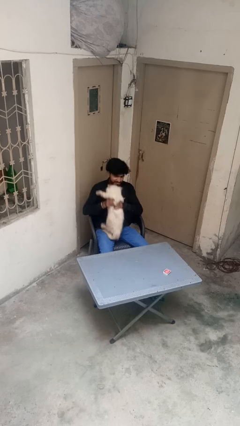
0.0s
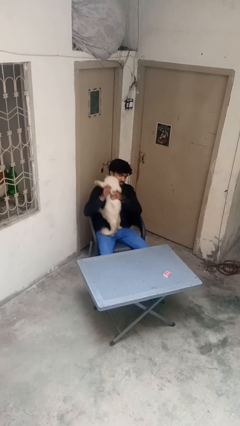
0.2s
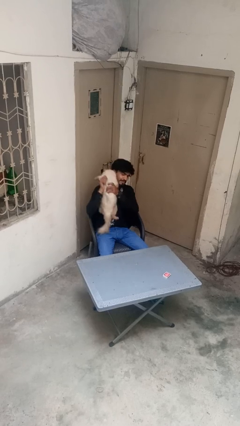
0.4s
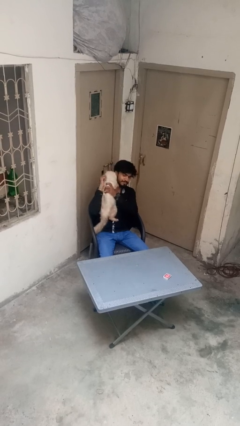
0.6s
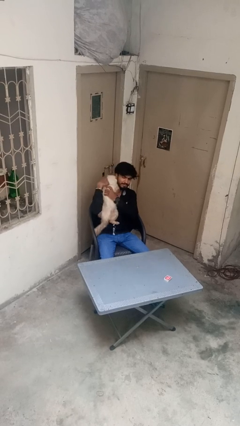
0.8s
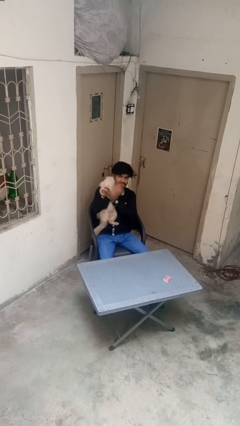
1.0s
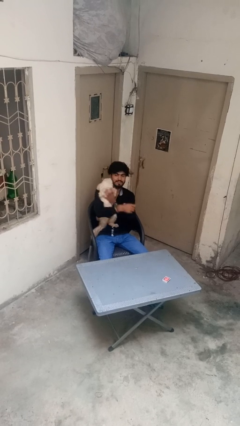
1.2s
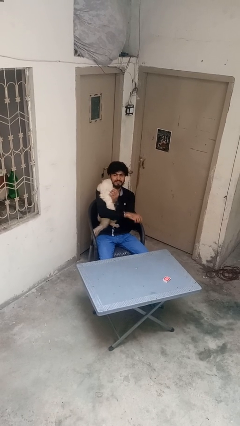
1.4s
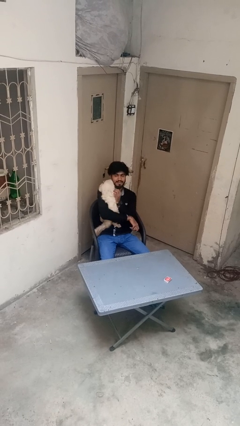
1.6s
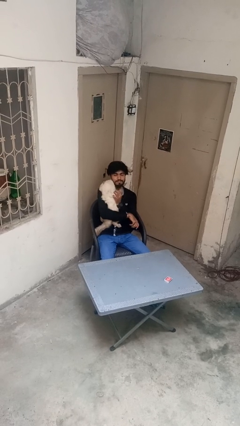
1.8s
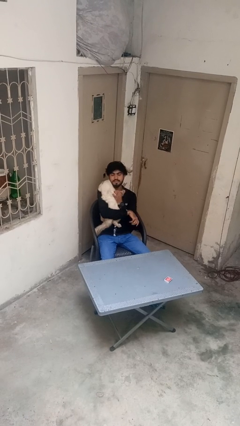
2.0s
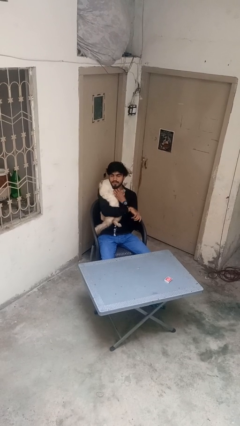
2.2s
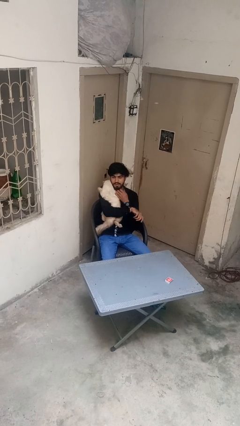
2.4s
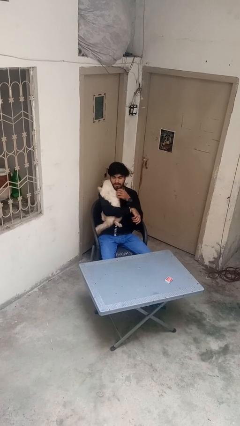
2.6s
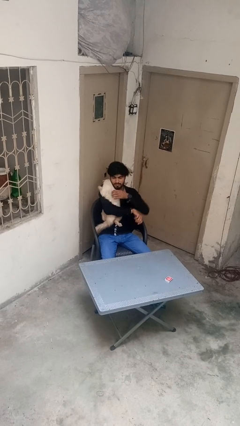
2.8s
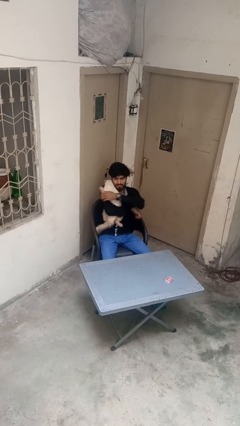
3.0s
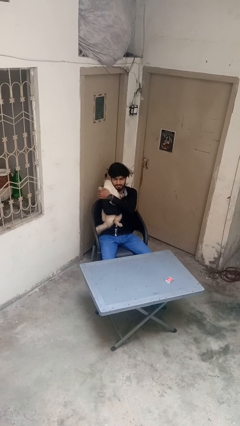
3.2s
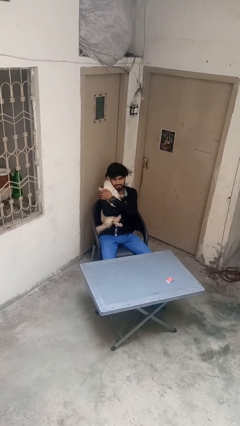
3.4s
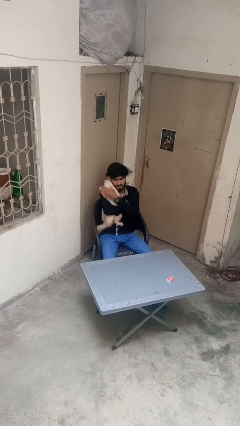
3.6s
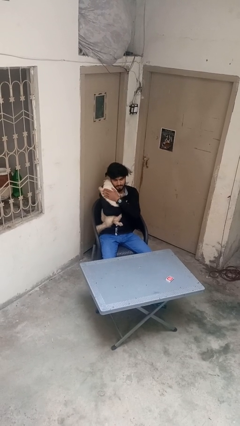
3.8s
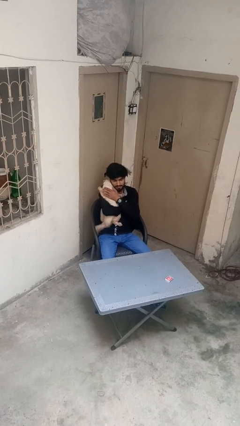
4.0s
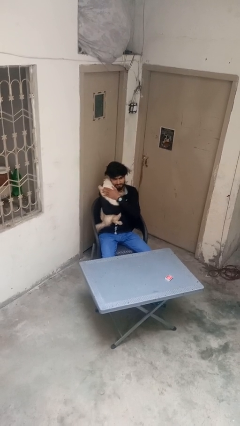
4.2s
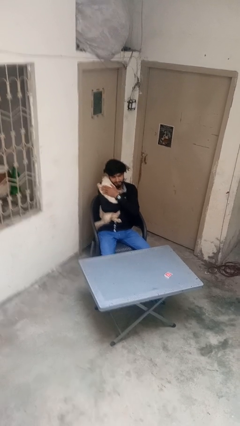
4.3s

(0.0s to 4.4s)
person hugs cat

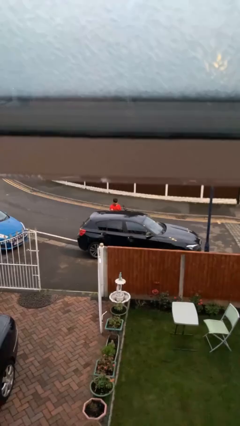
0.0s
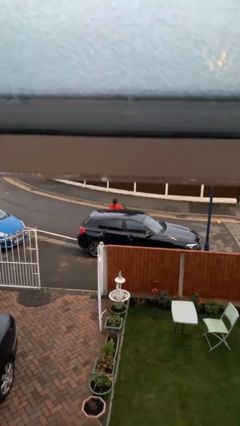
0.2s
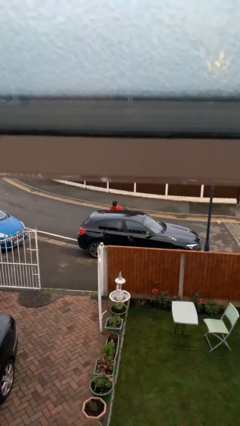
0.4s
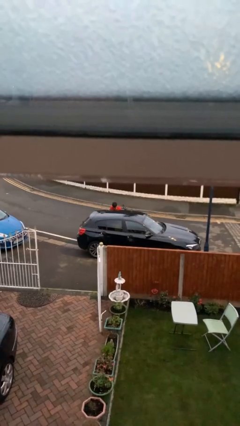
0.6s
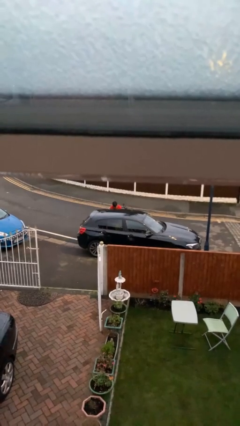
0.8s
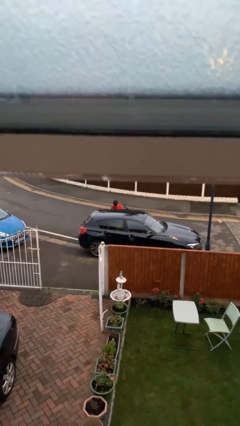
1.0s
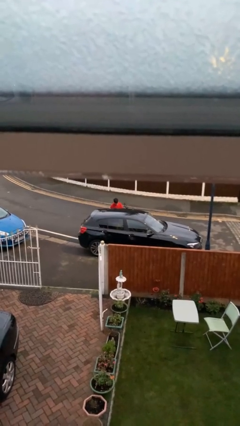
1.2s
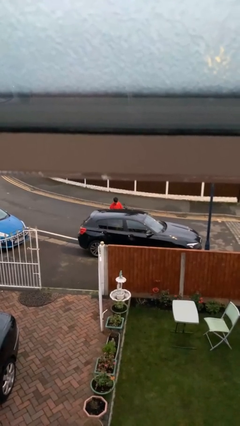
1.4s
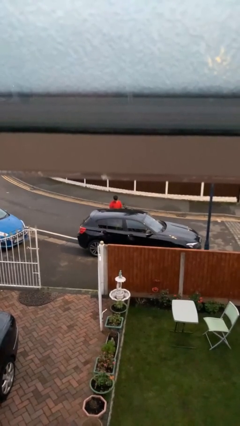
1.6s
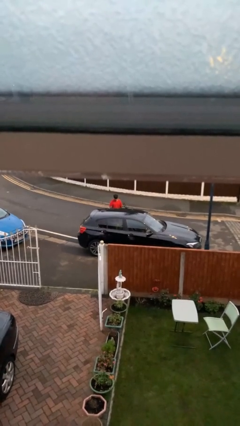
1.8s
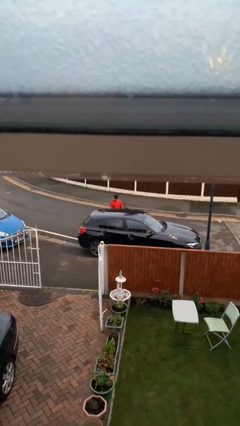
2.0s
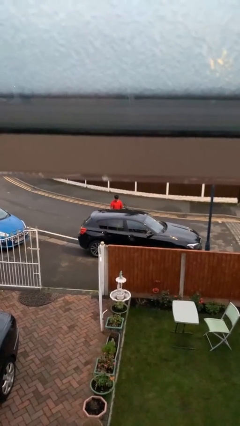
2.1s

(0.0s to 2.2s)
person loads car

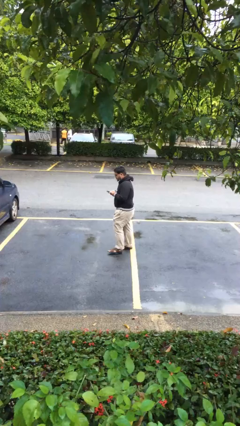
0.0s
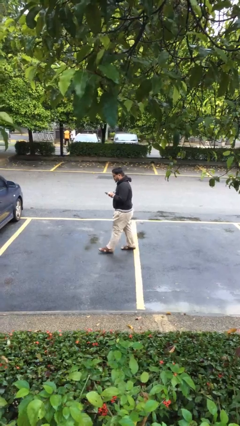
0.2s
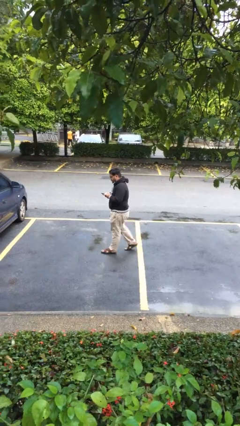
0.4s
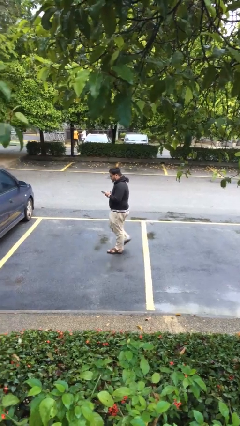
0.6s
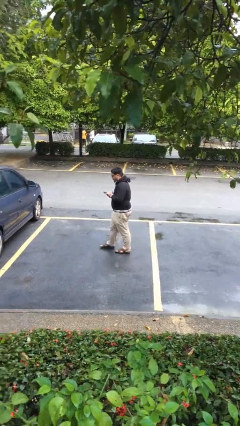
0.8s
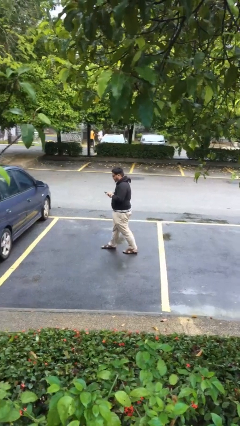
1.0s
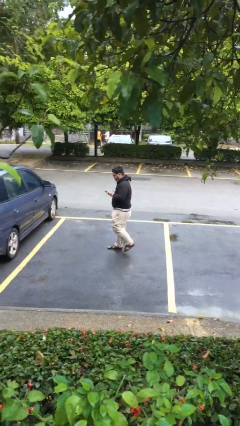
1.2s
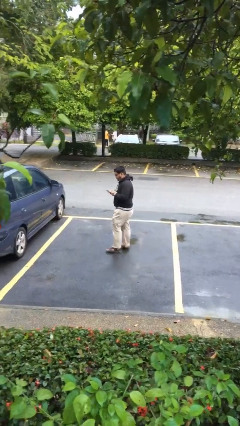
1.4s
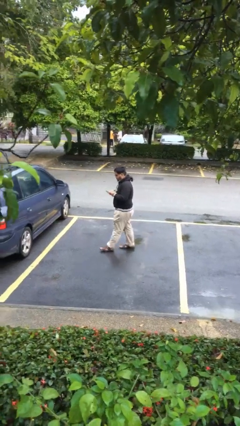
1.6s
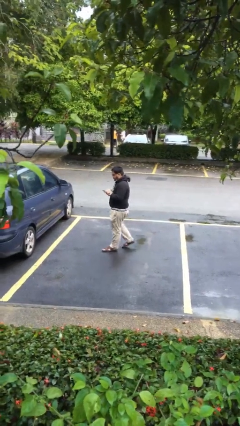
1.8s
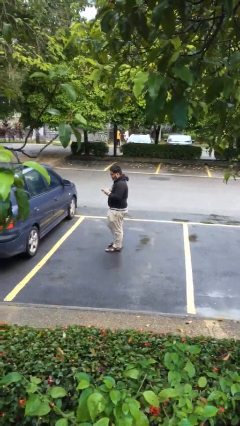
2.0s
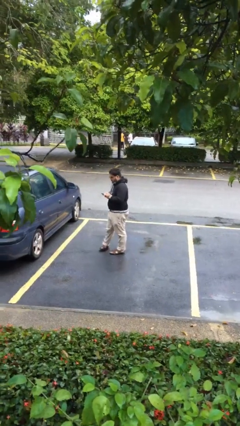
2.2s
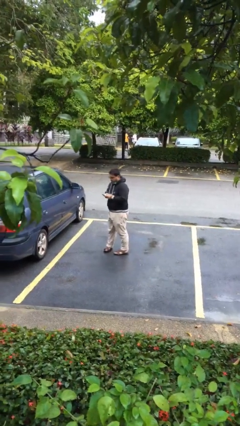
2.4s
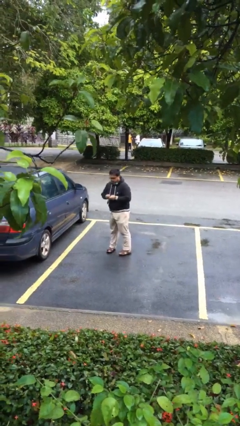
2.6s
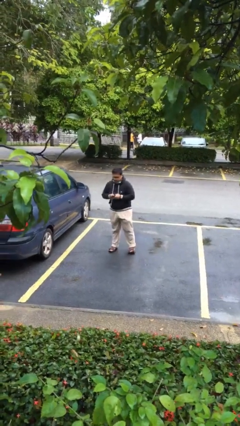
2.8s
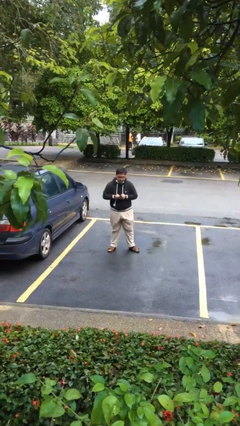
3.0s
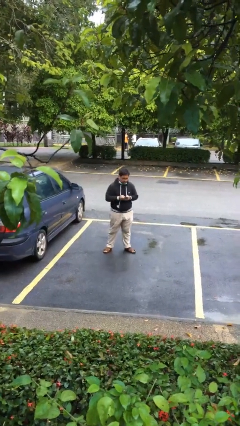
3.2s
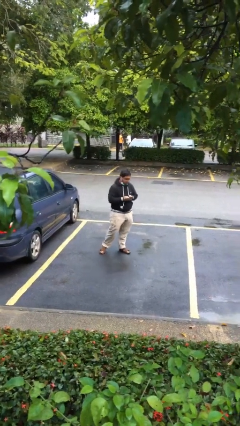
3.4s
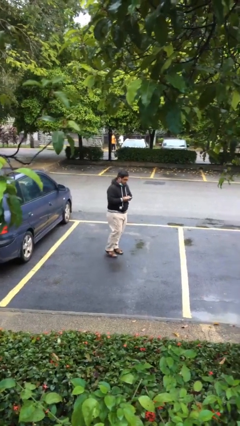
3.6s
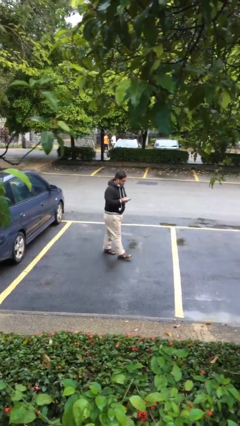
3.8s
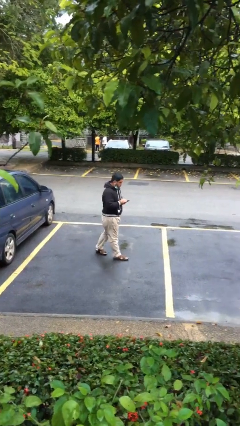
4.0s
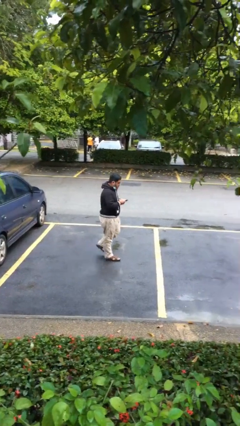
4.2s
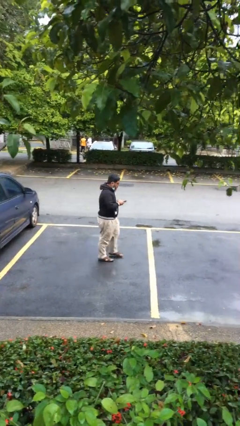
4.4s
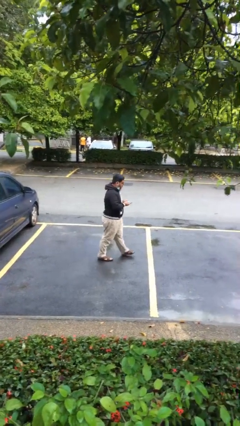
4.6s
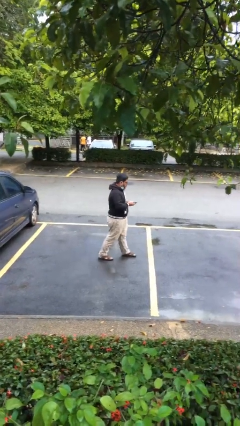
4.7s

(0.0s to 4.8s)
person texts on phone

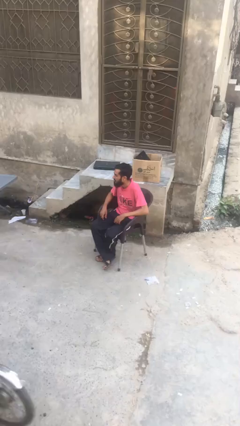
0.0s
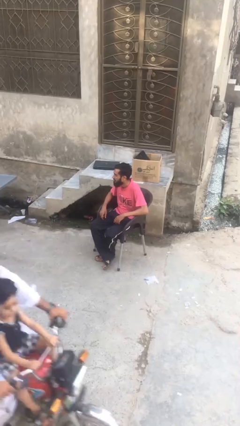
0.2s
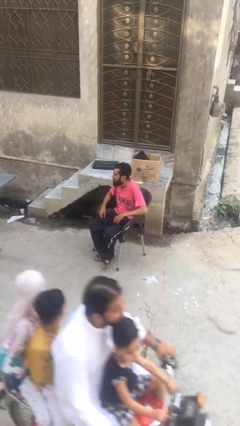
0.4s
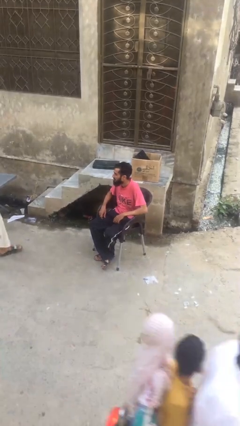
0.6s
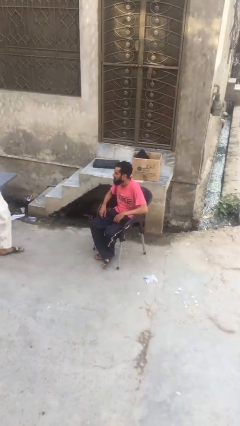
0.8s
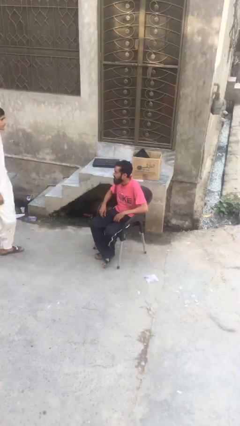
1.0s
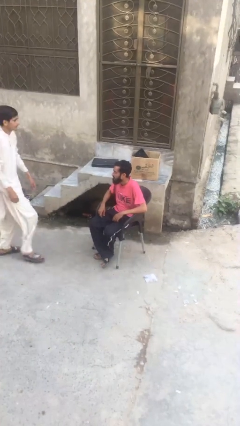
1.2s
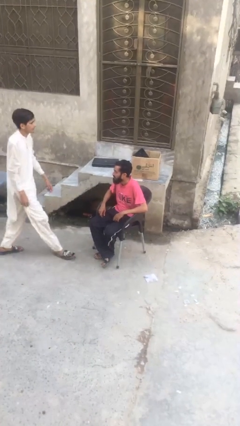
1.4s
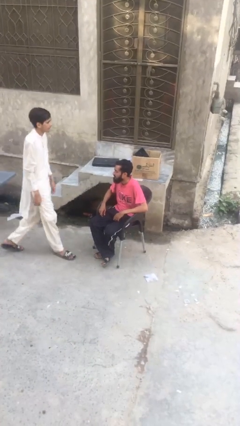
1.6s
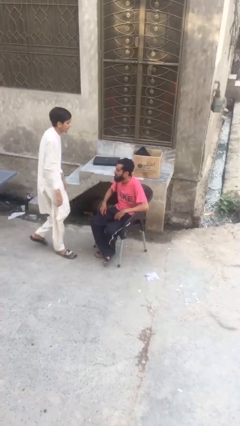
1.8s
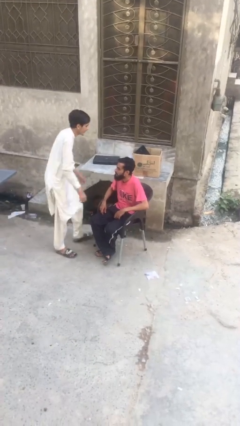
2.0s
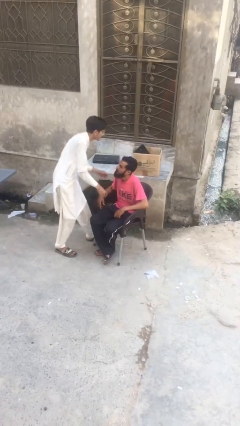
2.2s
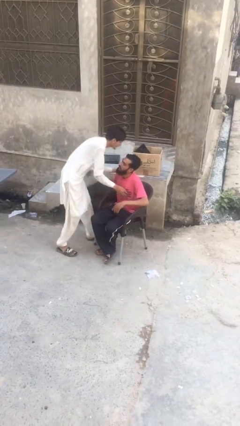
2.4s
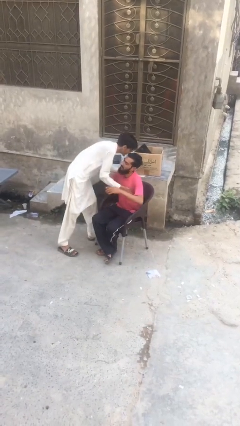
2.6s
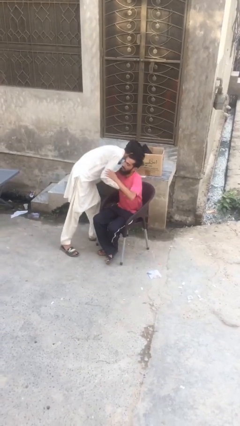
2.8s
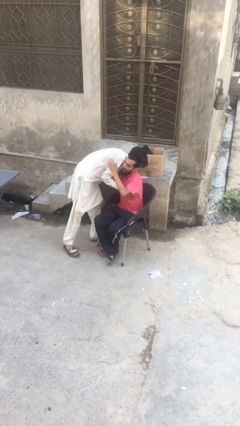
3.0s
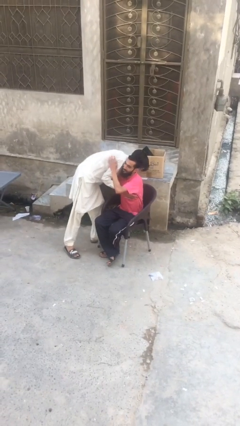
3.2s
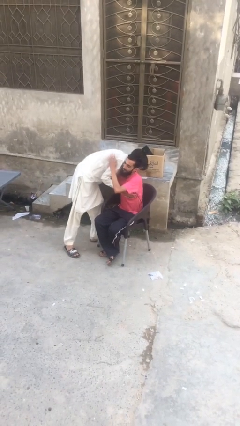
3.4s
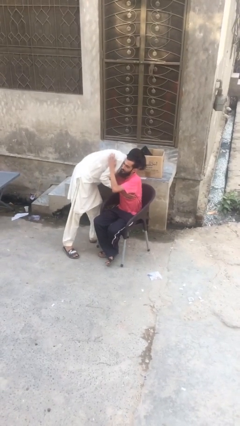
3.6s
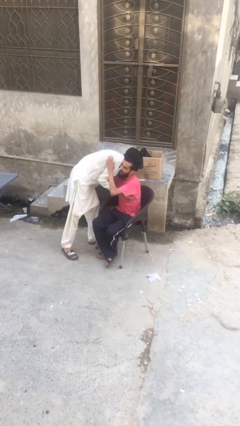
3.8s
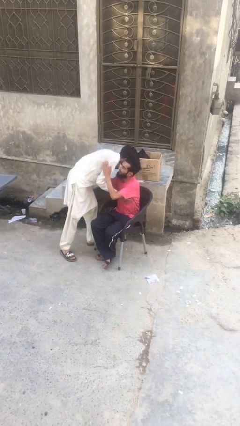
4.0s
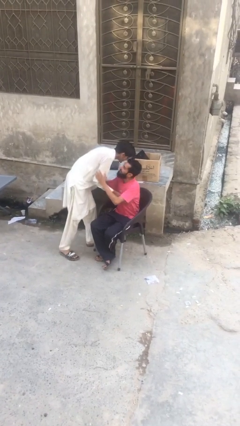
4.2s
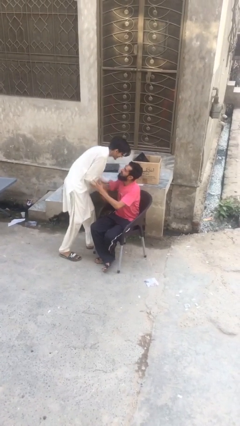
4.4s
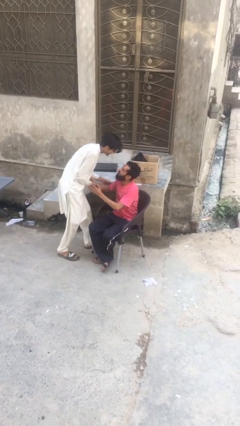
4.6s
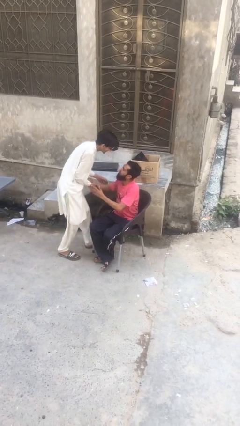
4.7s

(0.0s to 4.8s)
person embraces person

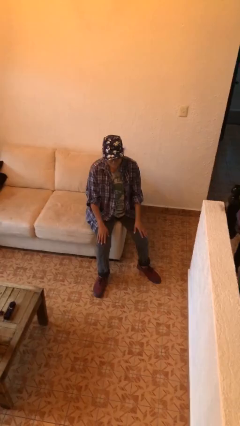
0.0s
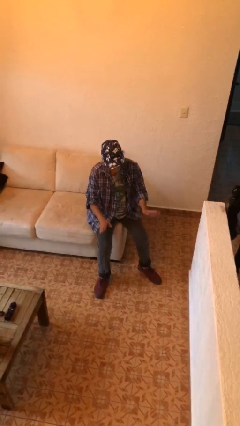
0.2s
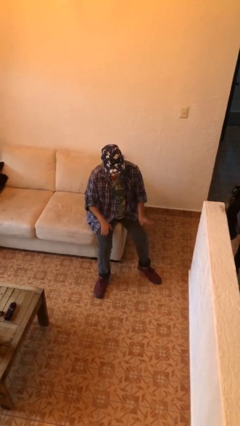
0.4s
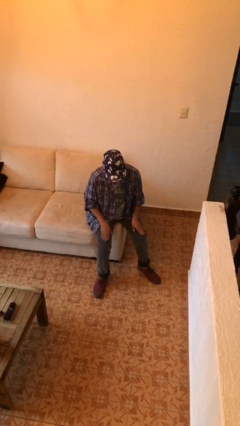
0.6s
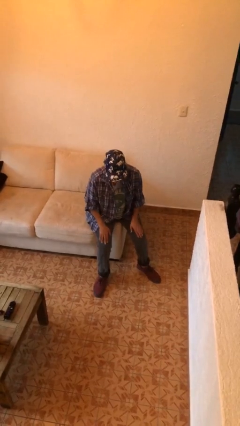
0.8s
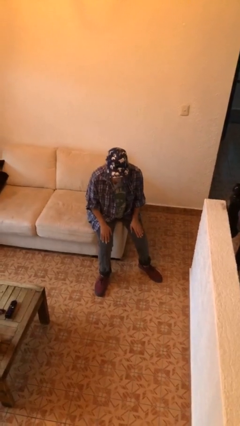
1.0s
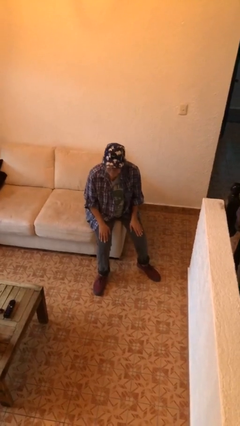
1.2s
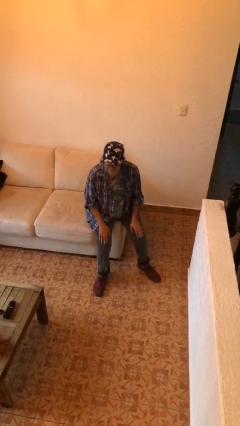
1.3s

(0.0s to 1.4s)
person slaps hands on thighs

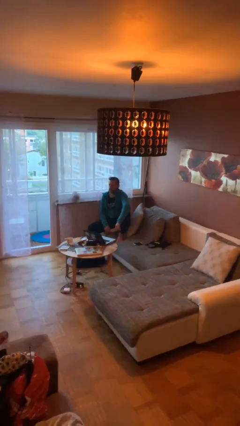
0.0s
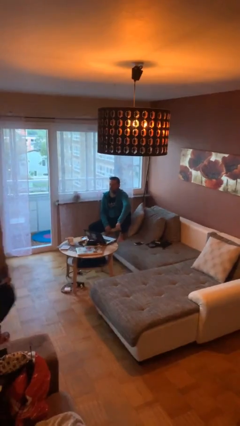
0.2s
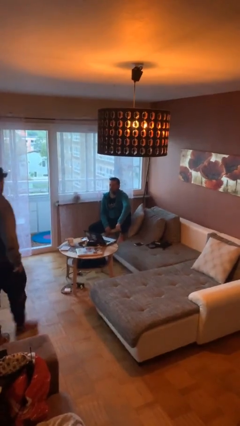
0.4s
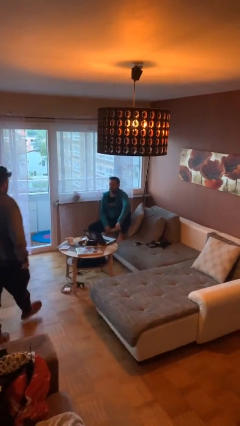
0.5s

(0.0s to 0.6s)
person shakes hand
